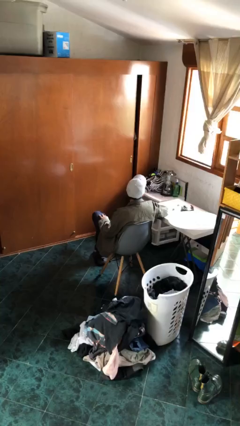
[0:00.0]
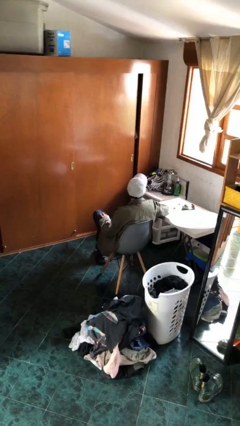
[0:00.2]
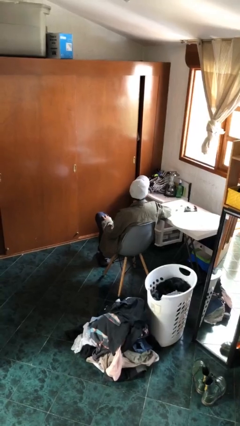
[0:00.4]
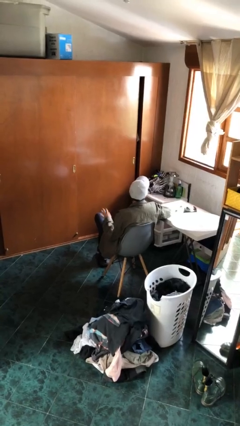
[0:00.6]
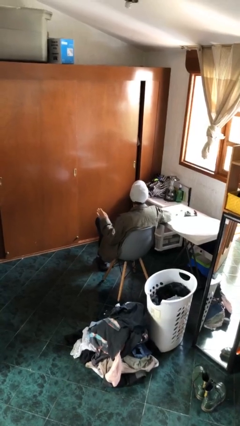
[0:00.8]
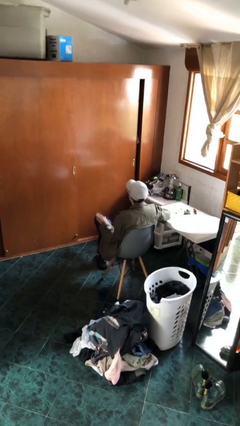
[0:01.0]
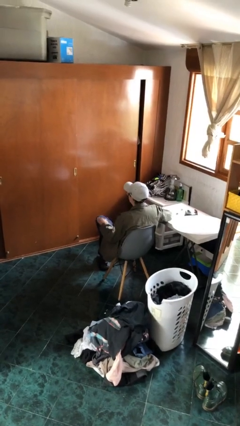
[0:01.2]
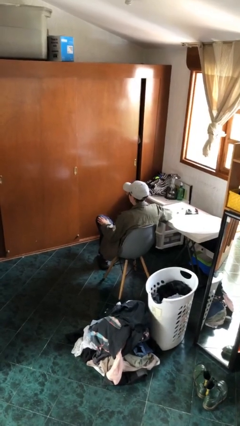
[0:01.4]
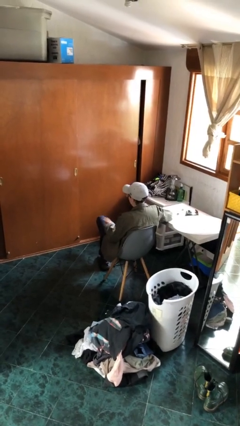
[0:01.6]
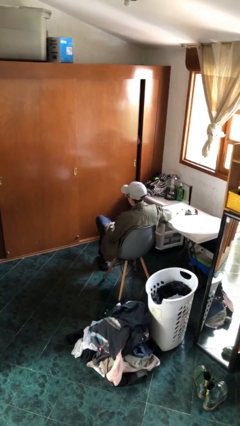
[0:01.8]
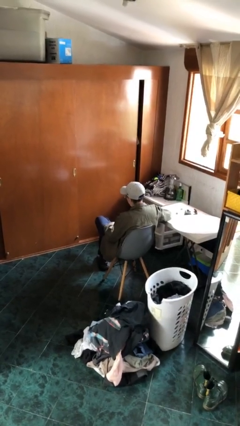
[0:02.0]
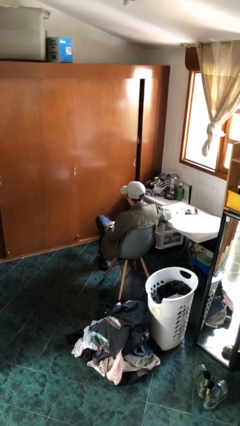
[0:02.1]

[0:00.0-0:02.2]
person slaps hands on thighs

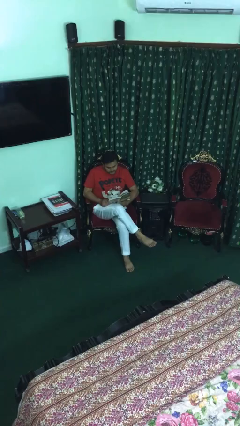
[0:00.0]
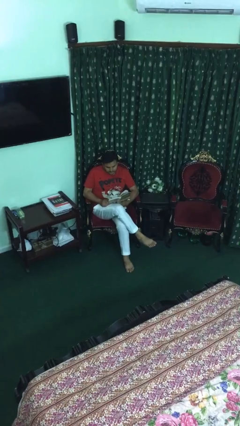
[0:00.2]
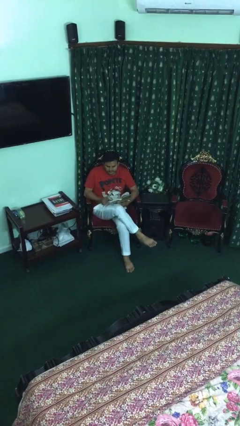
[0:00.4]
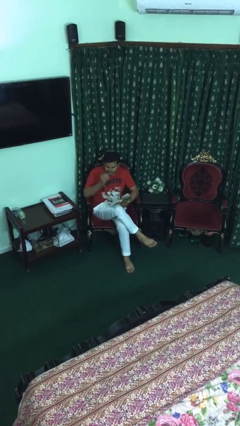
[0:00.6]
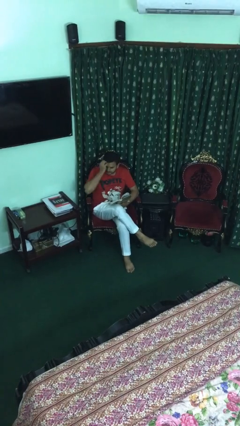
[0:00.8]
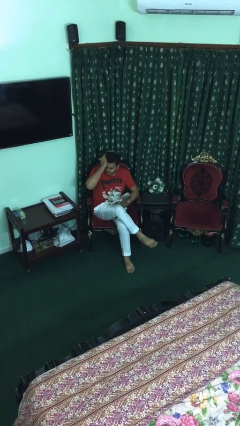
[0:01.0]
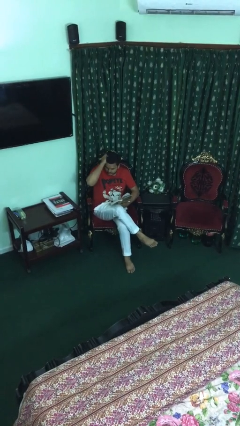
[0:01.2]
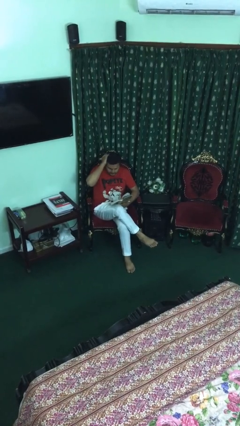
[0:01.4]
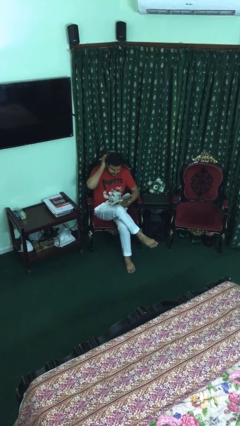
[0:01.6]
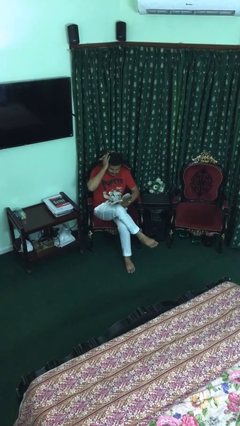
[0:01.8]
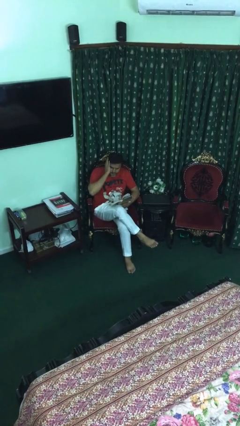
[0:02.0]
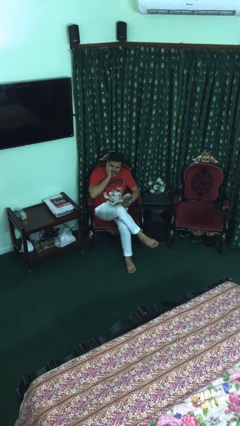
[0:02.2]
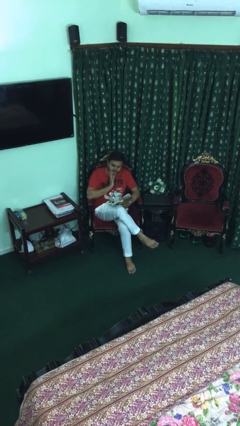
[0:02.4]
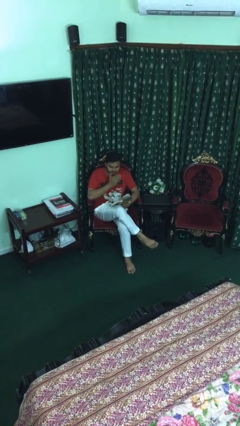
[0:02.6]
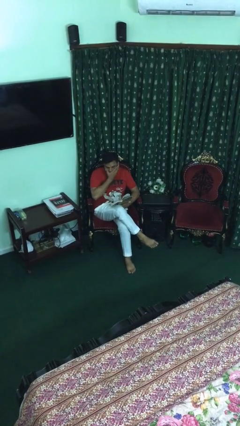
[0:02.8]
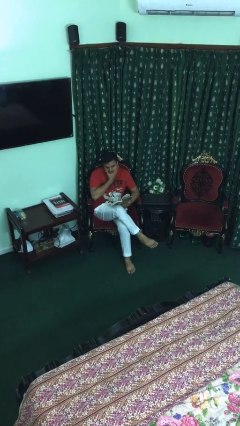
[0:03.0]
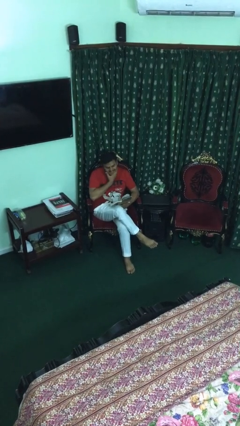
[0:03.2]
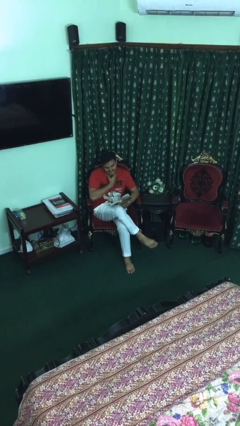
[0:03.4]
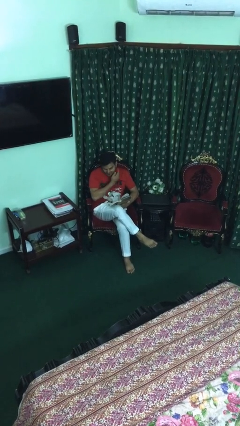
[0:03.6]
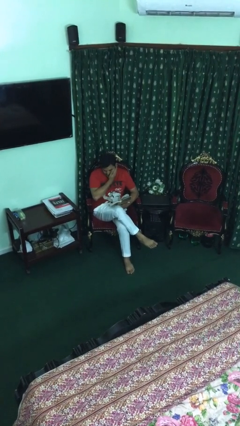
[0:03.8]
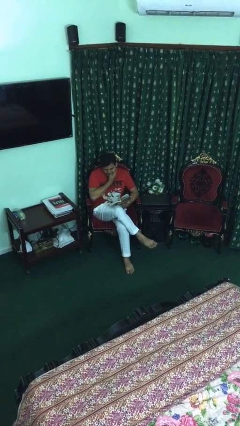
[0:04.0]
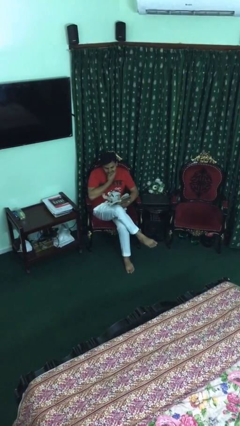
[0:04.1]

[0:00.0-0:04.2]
person reads document

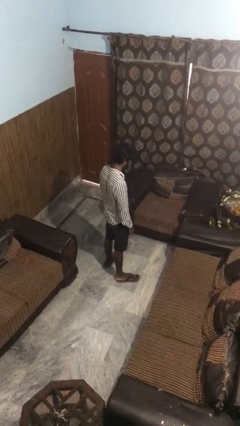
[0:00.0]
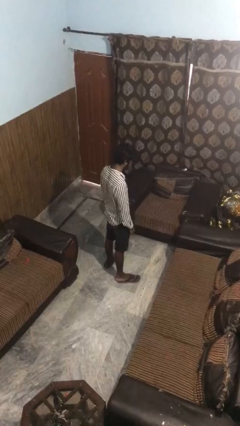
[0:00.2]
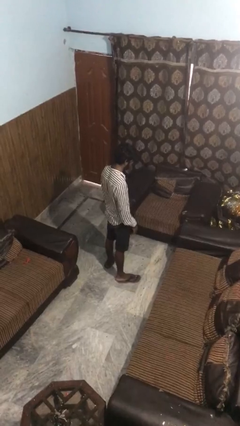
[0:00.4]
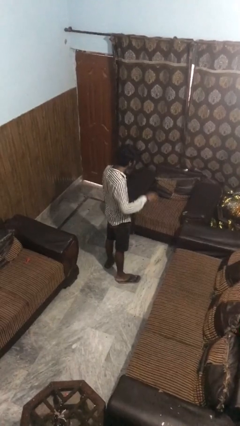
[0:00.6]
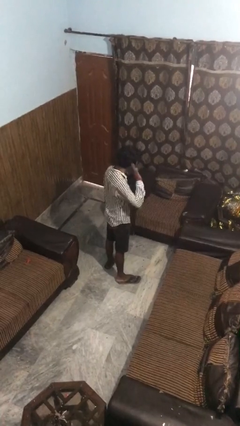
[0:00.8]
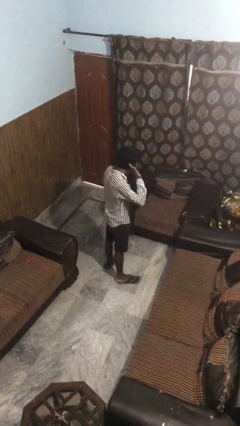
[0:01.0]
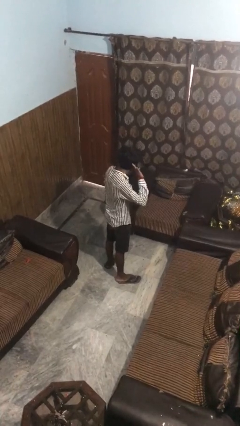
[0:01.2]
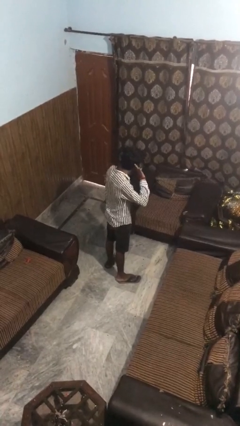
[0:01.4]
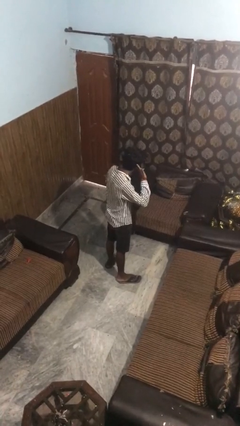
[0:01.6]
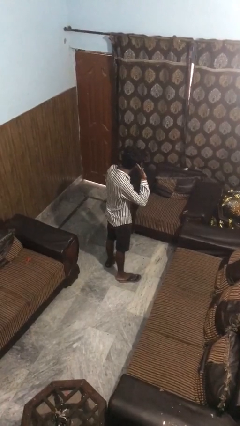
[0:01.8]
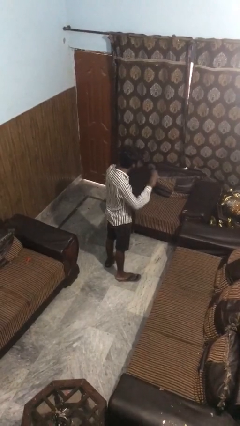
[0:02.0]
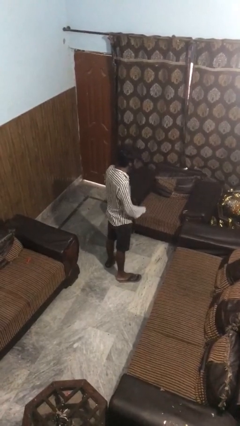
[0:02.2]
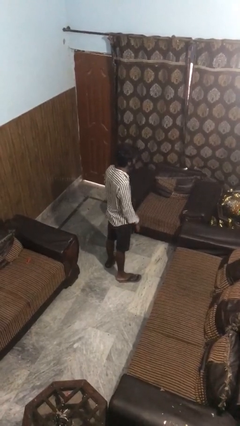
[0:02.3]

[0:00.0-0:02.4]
person gestures listen closely

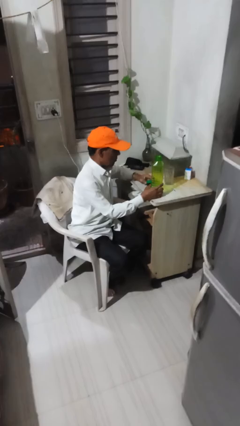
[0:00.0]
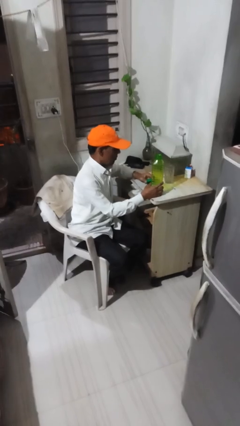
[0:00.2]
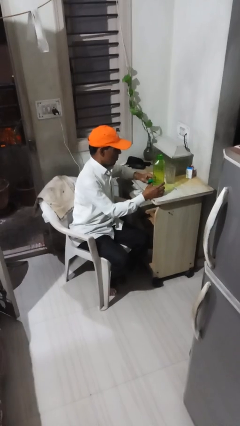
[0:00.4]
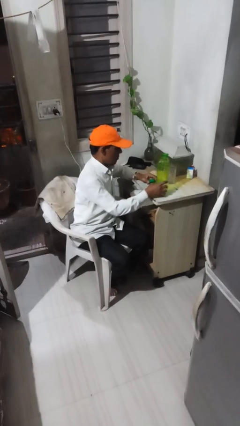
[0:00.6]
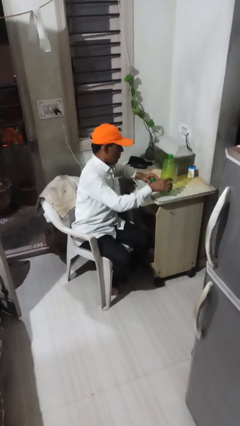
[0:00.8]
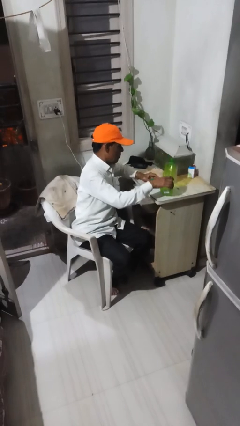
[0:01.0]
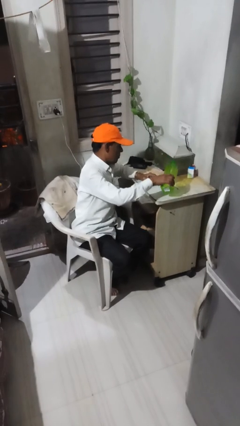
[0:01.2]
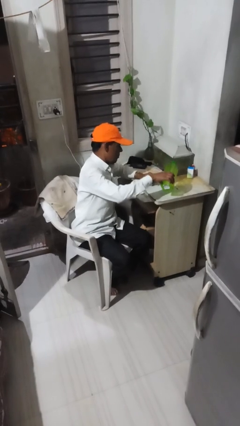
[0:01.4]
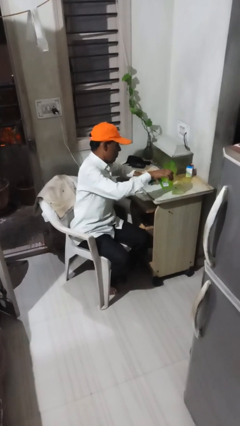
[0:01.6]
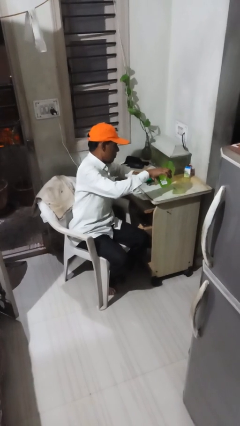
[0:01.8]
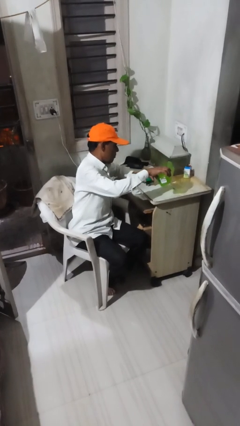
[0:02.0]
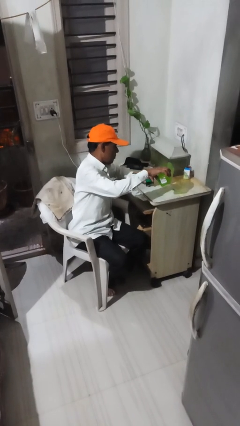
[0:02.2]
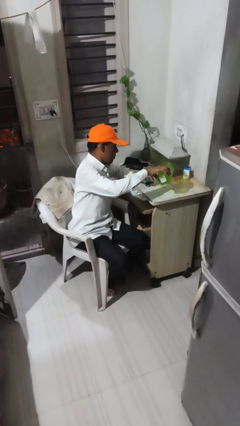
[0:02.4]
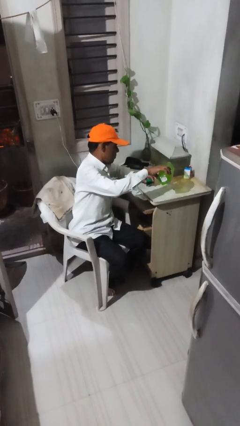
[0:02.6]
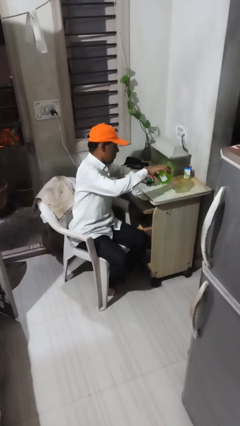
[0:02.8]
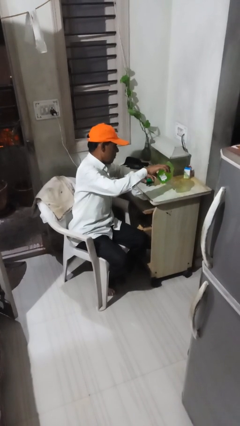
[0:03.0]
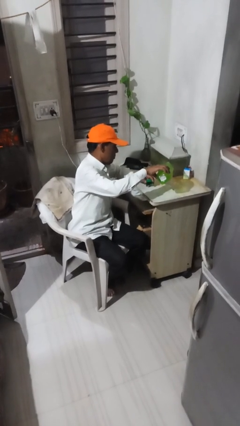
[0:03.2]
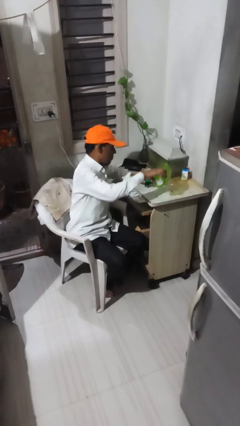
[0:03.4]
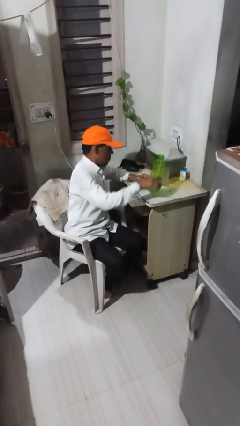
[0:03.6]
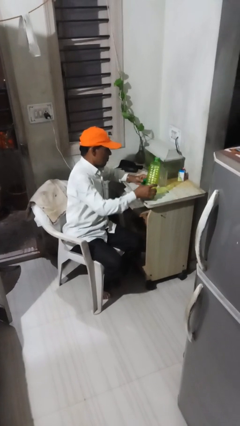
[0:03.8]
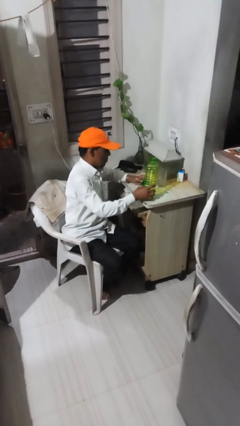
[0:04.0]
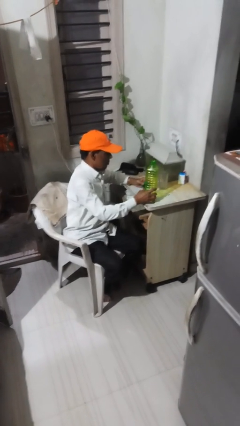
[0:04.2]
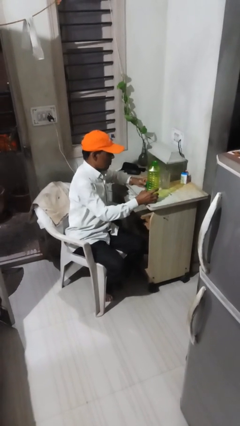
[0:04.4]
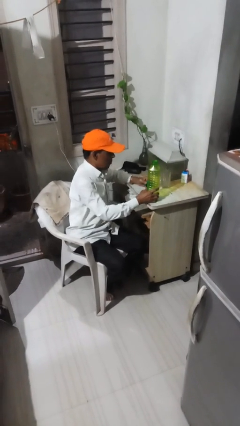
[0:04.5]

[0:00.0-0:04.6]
person pours liquid into cup

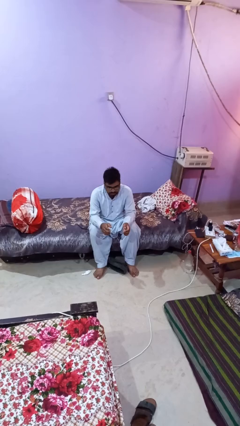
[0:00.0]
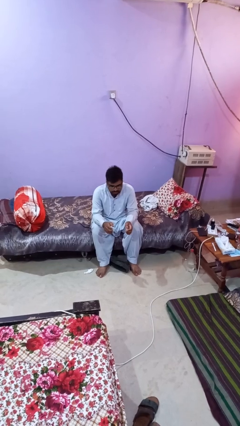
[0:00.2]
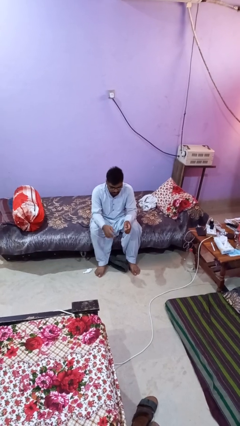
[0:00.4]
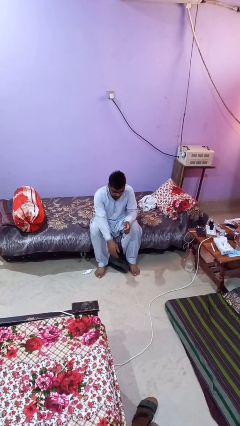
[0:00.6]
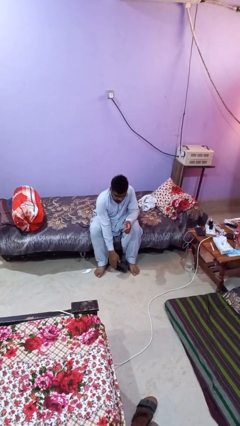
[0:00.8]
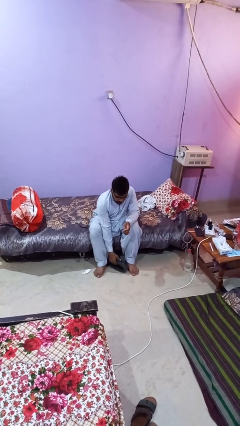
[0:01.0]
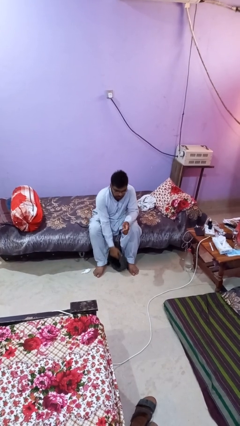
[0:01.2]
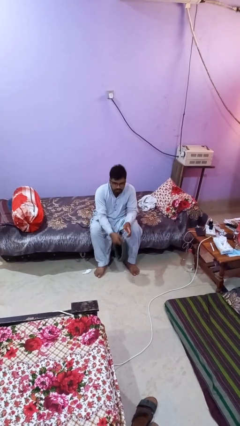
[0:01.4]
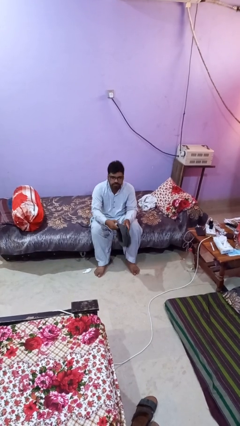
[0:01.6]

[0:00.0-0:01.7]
person picks up object from floor

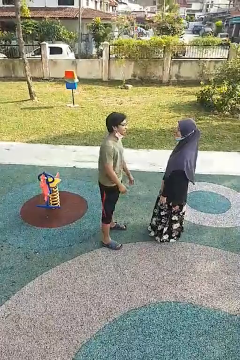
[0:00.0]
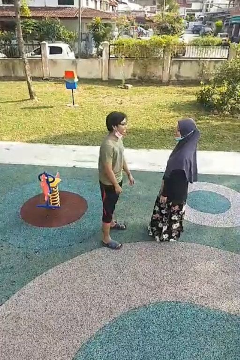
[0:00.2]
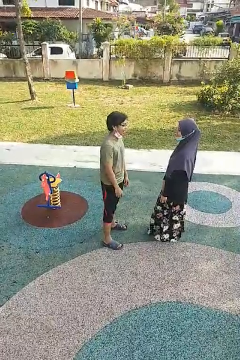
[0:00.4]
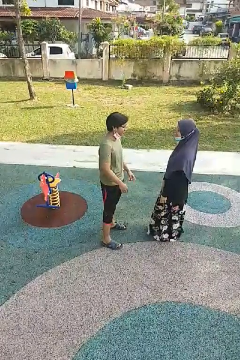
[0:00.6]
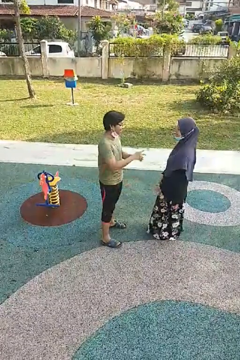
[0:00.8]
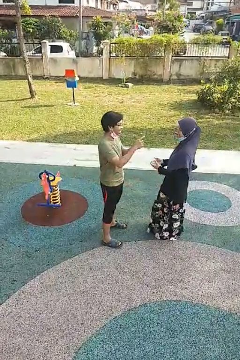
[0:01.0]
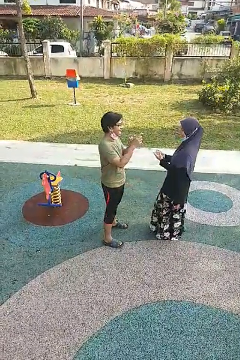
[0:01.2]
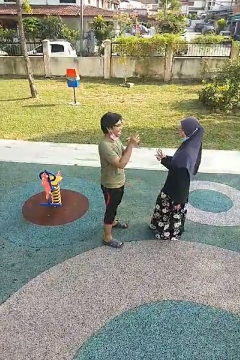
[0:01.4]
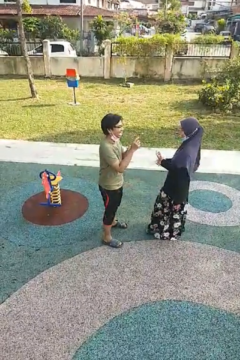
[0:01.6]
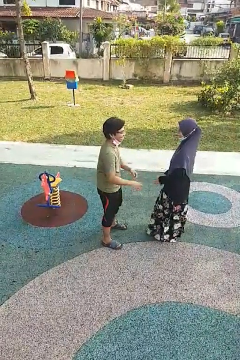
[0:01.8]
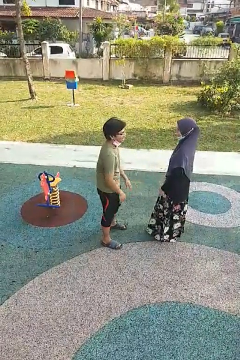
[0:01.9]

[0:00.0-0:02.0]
person laughs with person

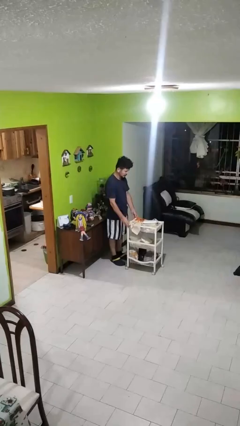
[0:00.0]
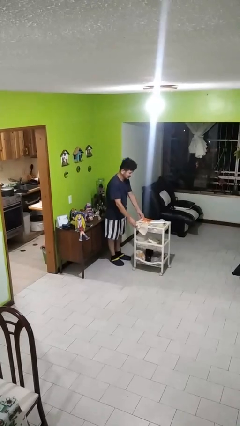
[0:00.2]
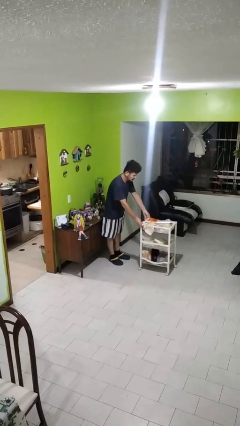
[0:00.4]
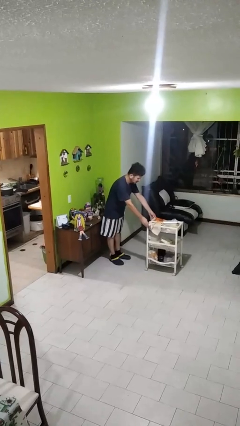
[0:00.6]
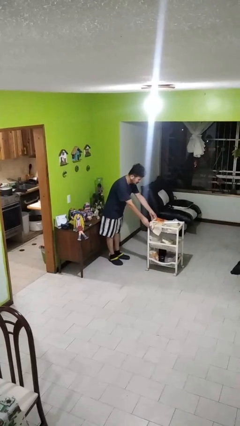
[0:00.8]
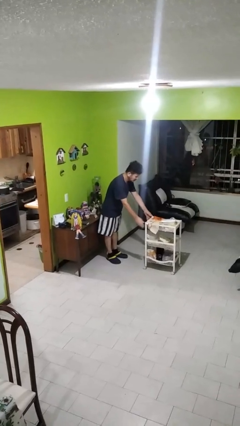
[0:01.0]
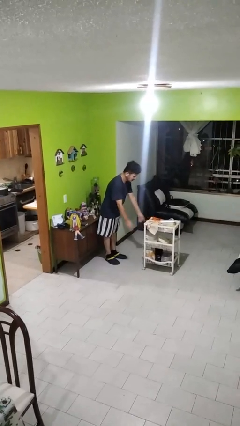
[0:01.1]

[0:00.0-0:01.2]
person pushes wheeled cart
